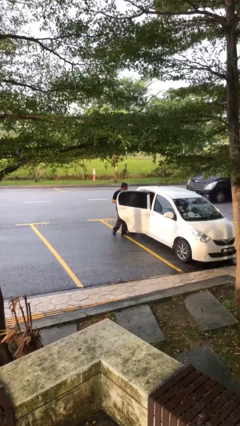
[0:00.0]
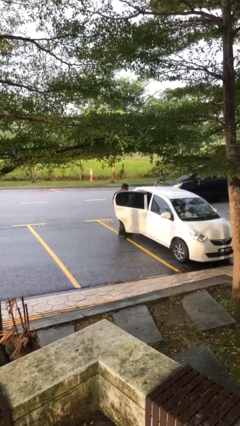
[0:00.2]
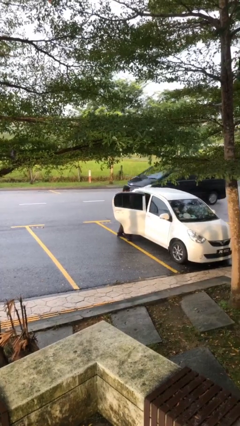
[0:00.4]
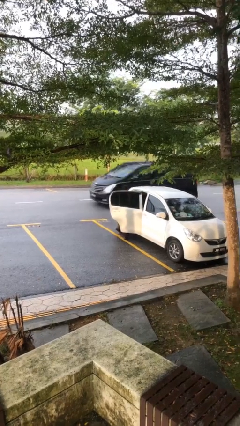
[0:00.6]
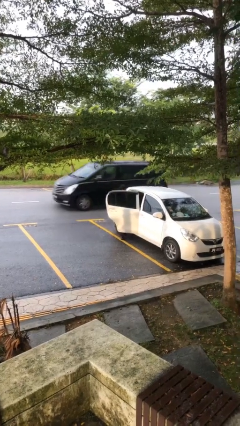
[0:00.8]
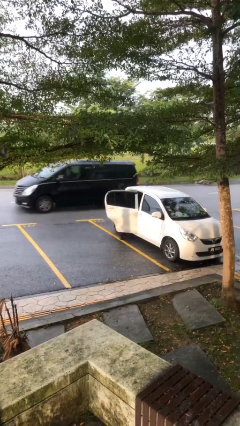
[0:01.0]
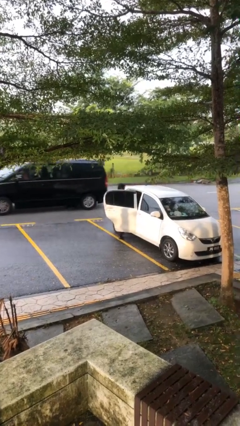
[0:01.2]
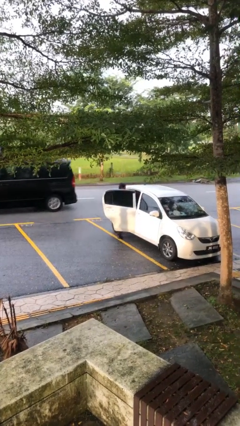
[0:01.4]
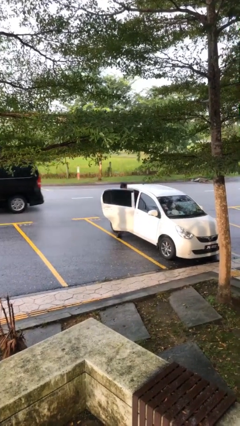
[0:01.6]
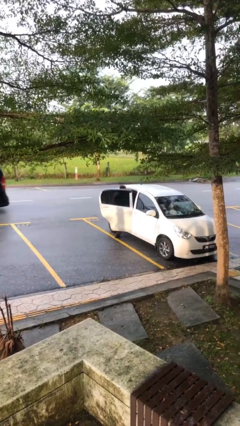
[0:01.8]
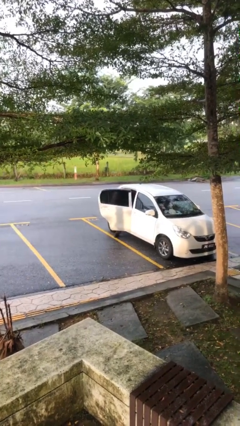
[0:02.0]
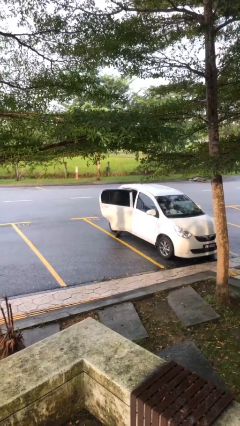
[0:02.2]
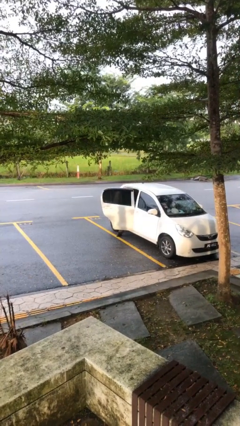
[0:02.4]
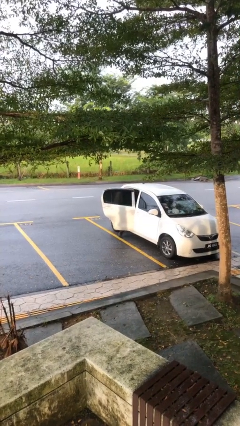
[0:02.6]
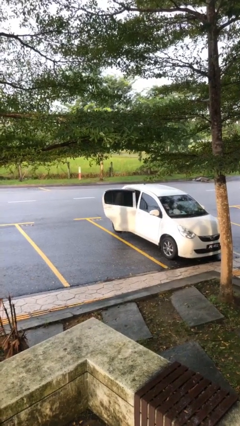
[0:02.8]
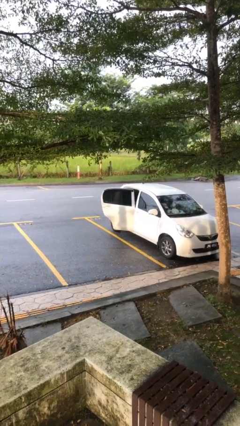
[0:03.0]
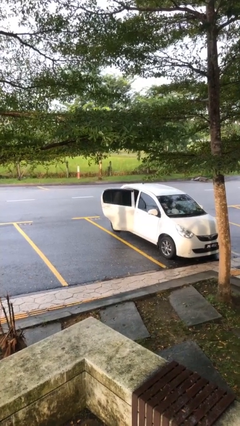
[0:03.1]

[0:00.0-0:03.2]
person enters car

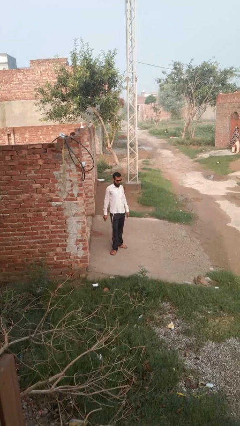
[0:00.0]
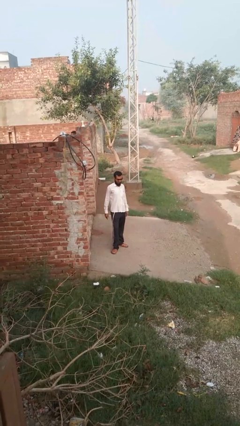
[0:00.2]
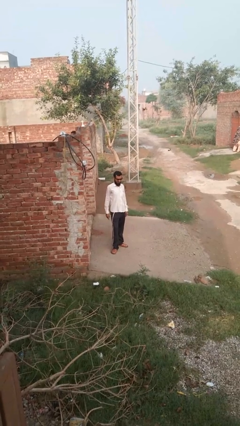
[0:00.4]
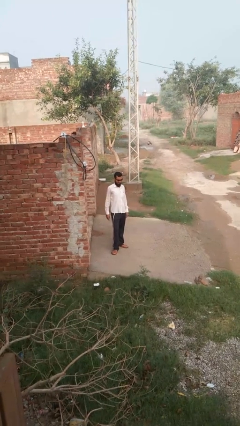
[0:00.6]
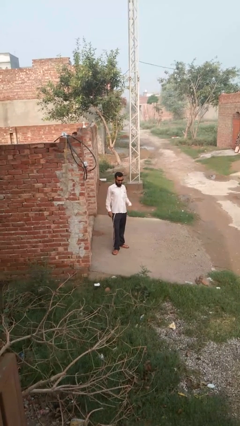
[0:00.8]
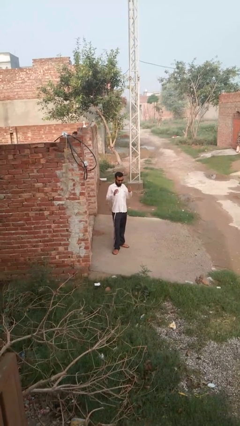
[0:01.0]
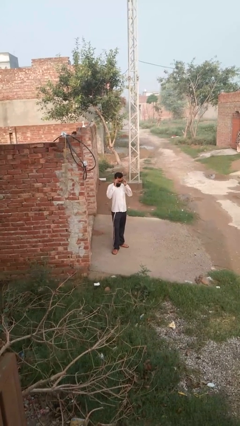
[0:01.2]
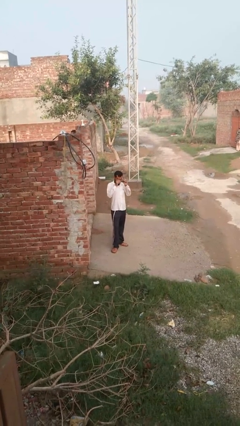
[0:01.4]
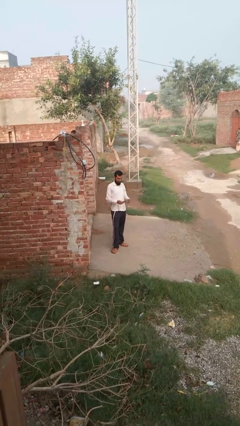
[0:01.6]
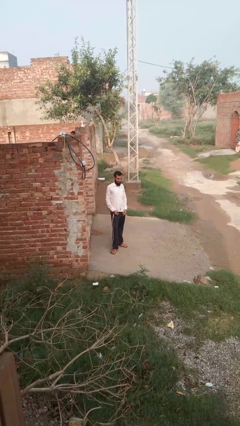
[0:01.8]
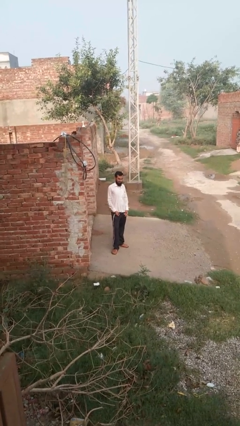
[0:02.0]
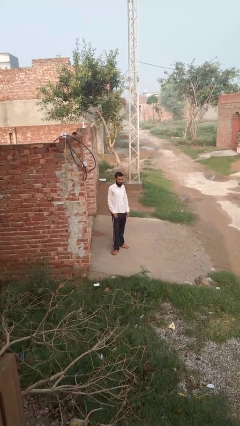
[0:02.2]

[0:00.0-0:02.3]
person takes off glasses

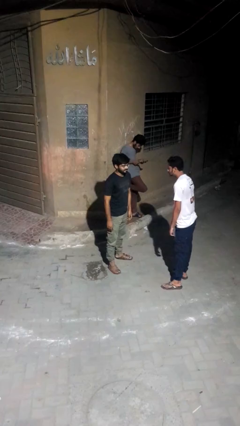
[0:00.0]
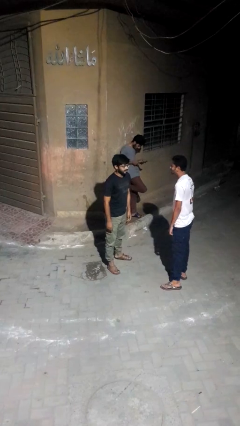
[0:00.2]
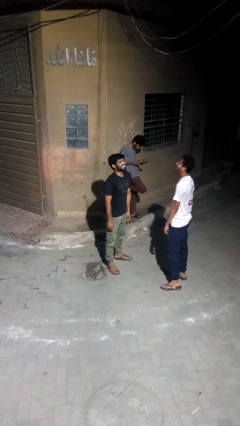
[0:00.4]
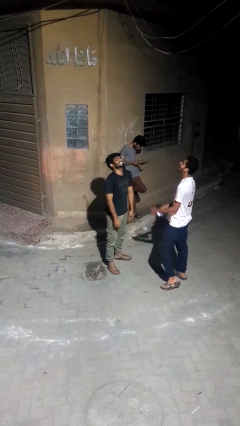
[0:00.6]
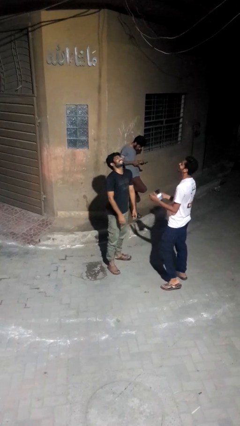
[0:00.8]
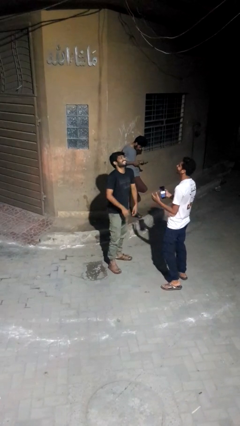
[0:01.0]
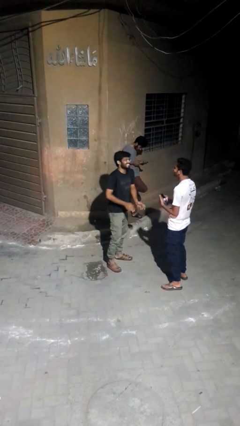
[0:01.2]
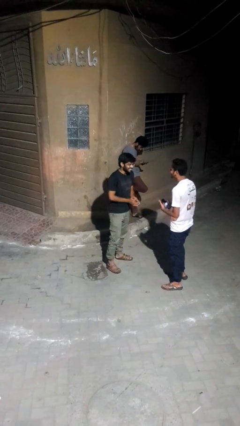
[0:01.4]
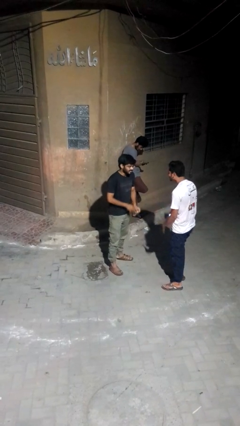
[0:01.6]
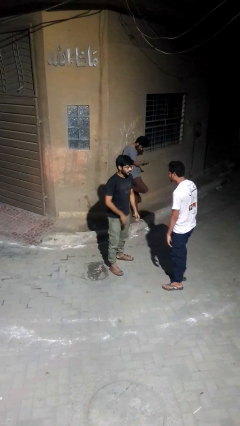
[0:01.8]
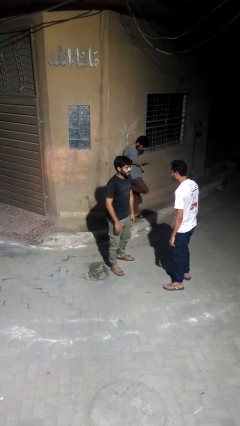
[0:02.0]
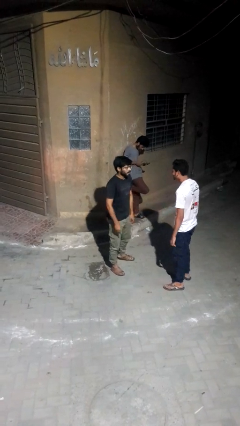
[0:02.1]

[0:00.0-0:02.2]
person laughs with person

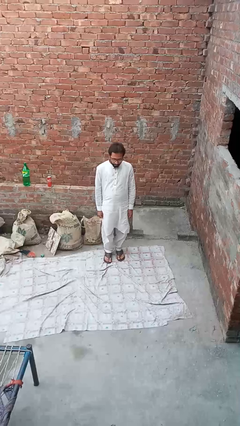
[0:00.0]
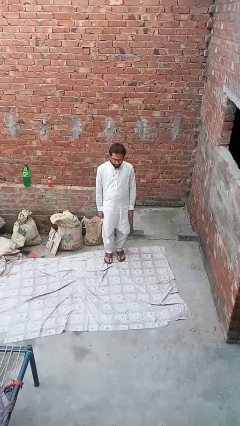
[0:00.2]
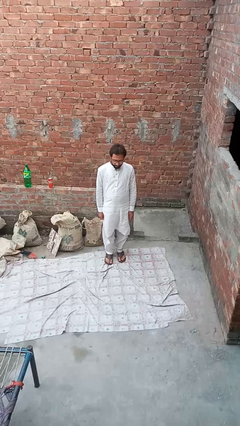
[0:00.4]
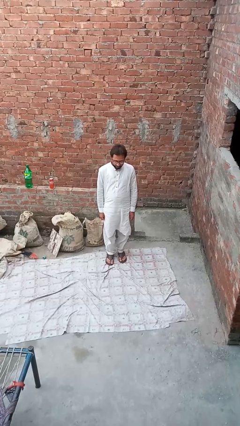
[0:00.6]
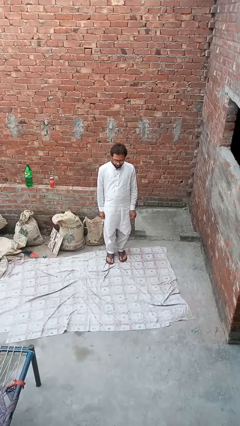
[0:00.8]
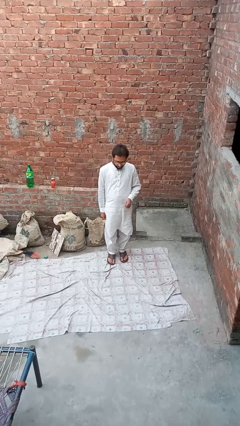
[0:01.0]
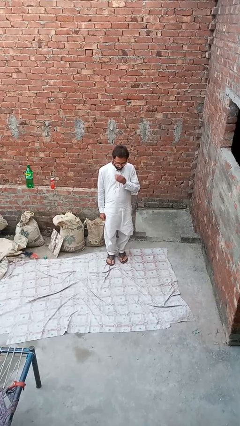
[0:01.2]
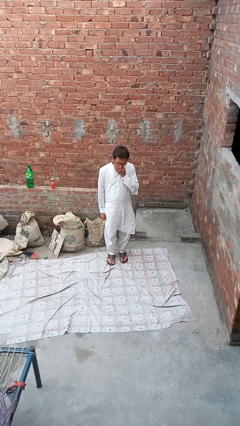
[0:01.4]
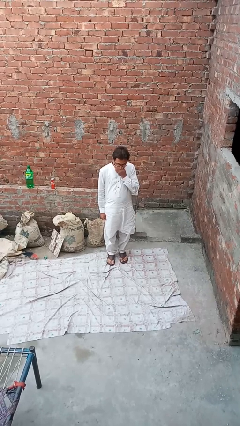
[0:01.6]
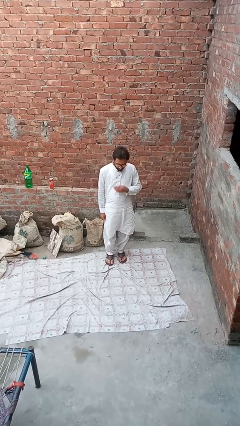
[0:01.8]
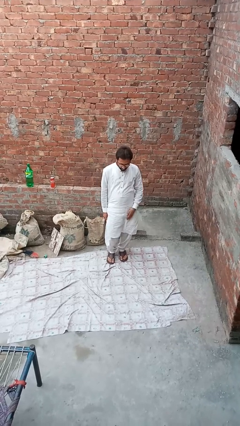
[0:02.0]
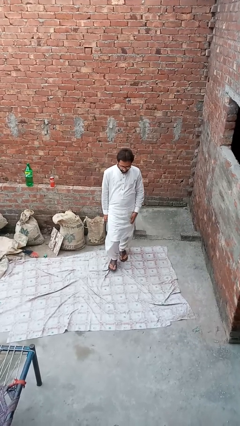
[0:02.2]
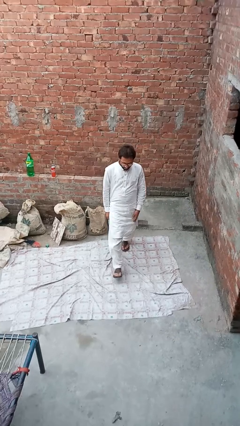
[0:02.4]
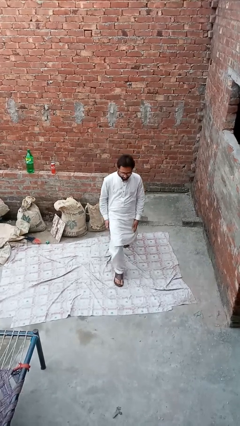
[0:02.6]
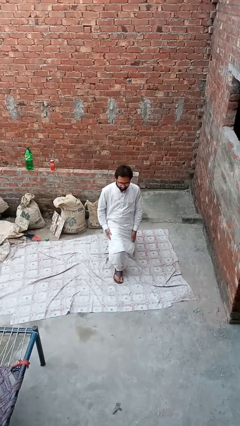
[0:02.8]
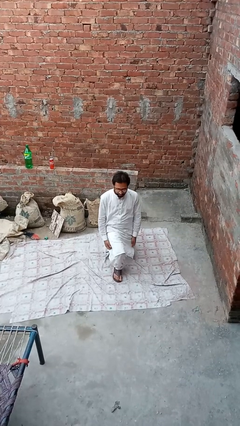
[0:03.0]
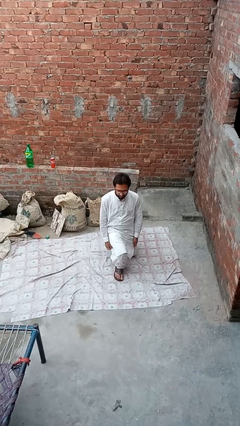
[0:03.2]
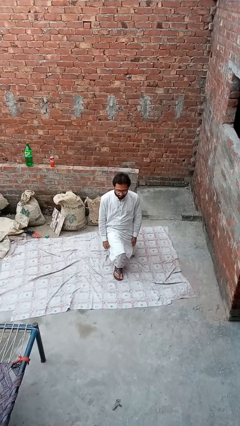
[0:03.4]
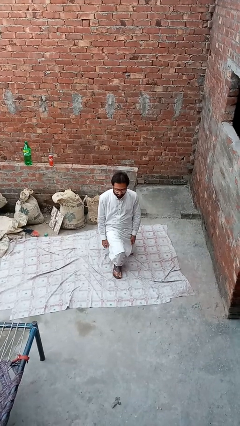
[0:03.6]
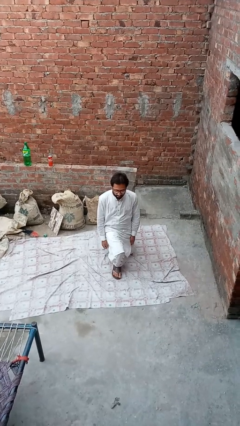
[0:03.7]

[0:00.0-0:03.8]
person exercises with lunges

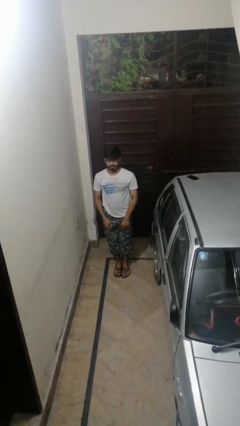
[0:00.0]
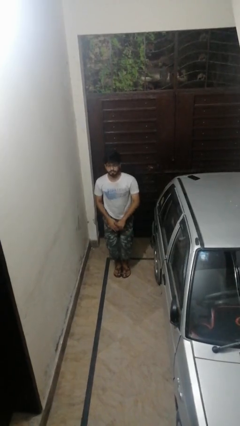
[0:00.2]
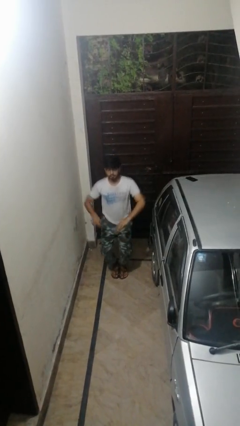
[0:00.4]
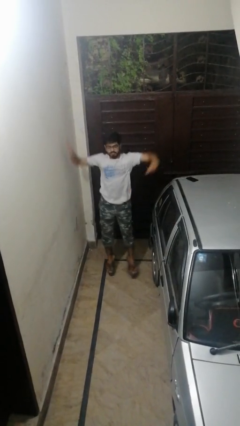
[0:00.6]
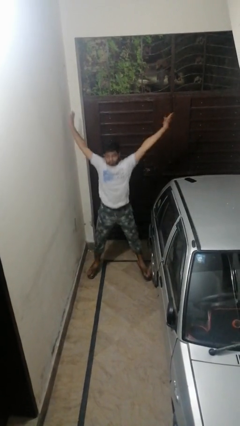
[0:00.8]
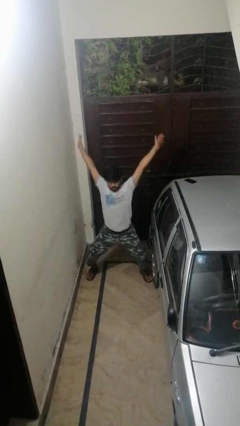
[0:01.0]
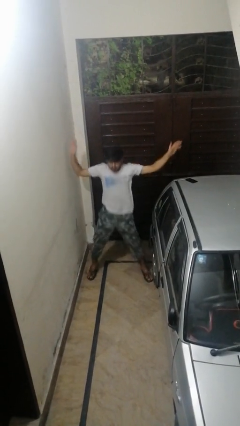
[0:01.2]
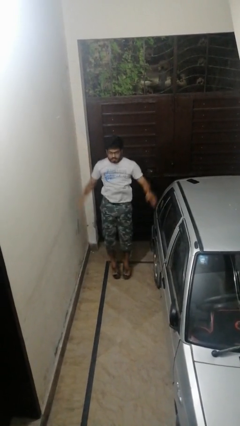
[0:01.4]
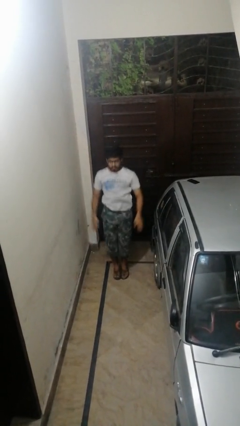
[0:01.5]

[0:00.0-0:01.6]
person exercises with jumping jacks

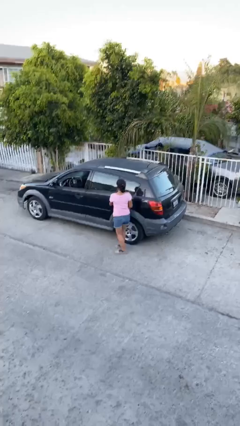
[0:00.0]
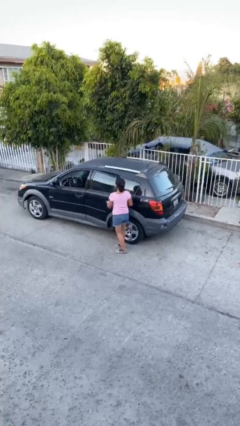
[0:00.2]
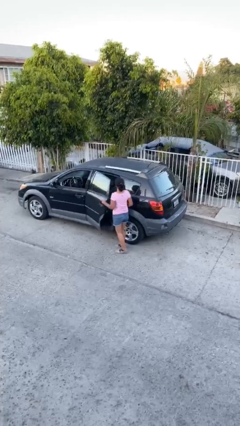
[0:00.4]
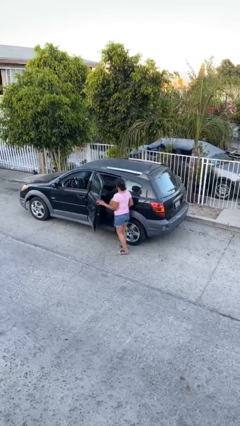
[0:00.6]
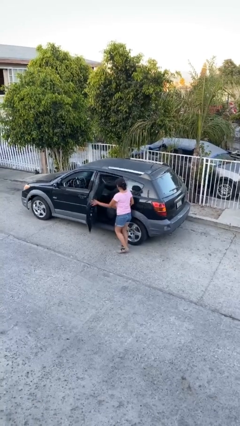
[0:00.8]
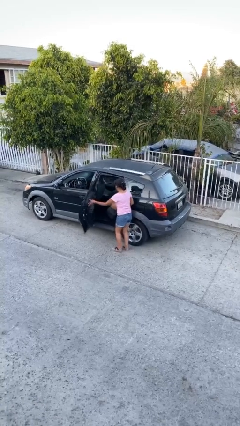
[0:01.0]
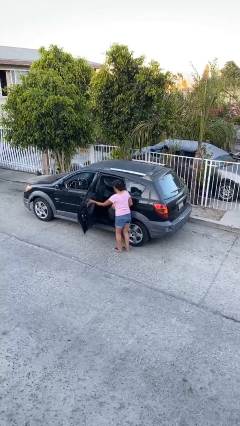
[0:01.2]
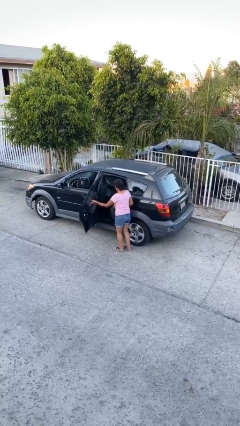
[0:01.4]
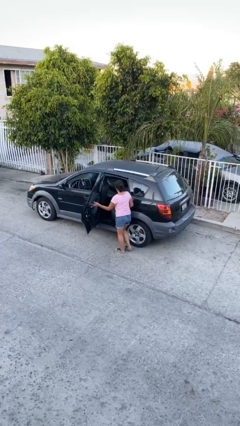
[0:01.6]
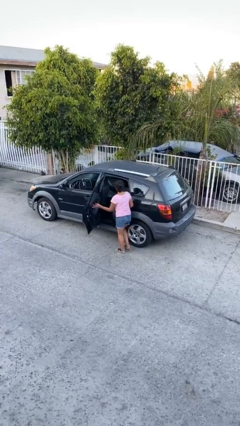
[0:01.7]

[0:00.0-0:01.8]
person opens car door

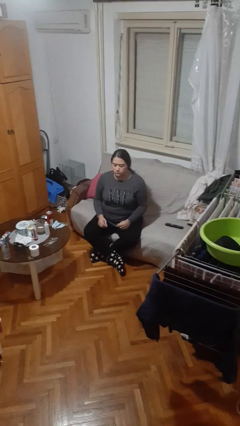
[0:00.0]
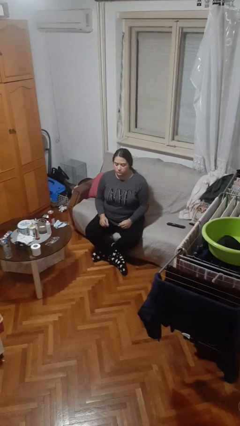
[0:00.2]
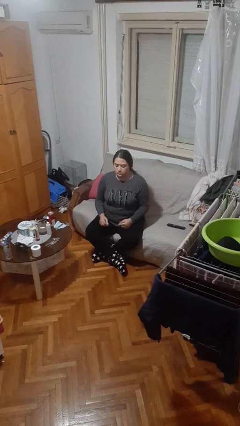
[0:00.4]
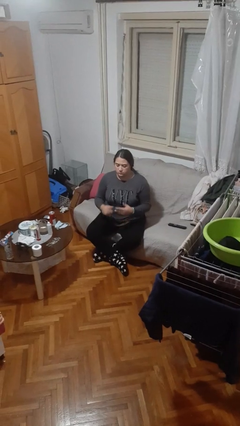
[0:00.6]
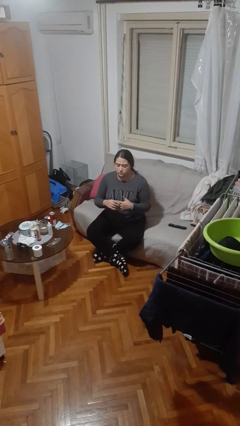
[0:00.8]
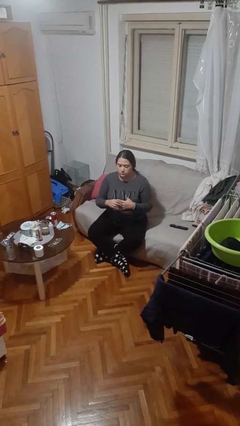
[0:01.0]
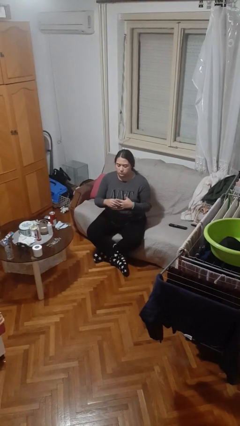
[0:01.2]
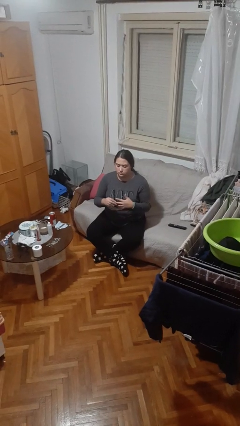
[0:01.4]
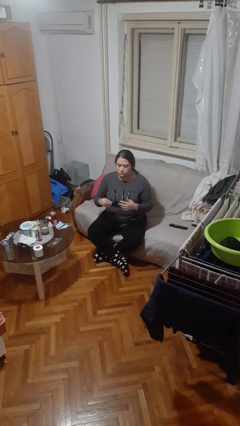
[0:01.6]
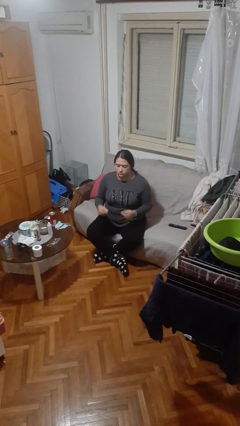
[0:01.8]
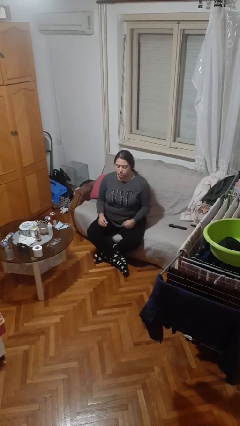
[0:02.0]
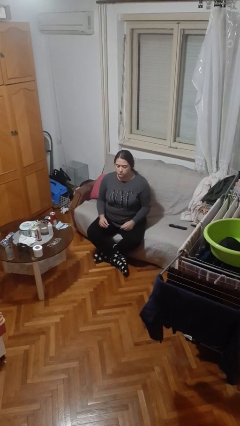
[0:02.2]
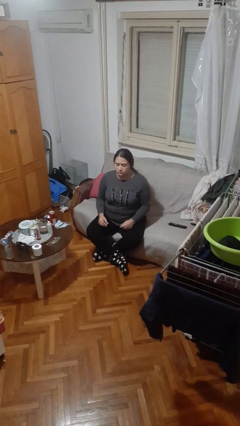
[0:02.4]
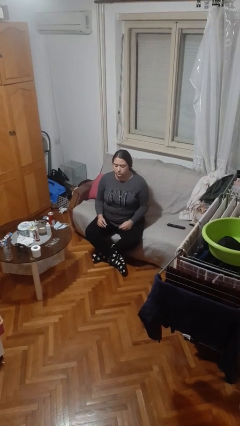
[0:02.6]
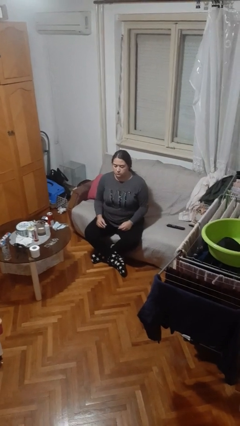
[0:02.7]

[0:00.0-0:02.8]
person takes off ring
